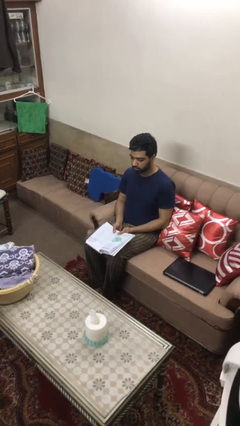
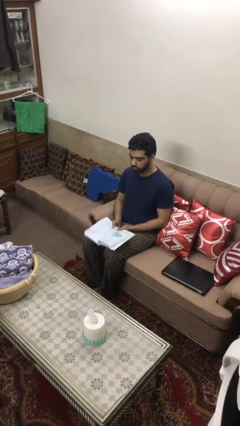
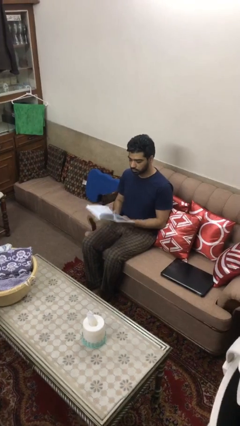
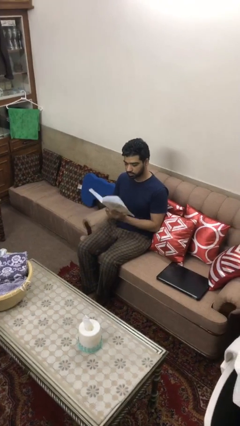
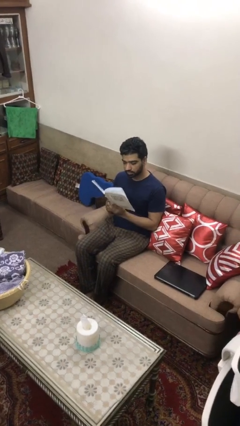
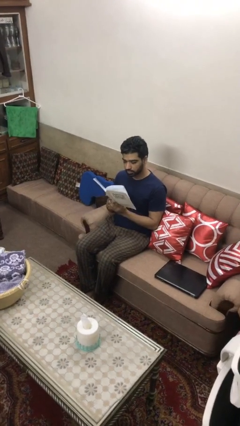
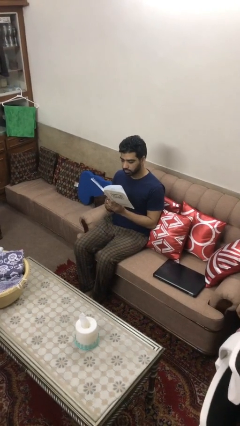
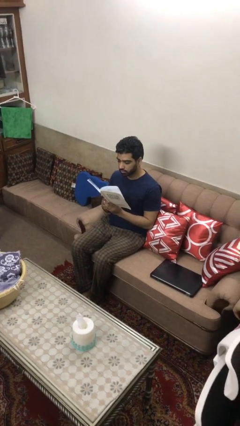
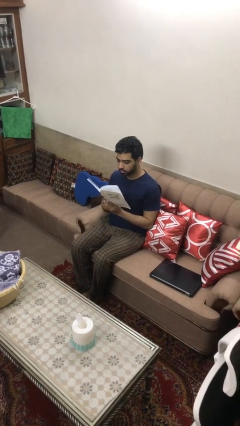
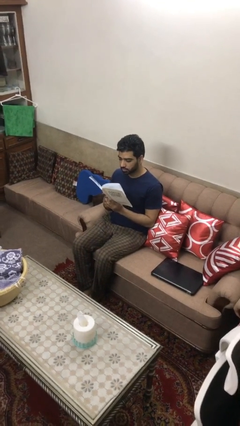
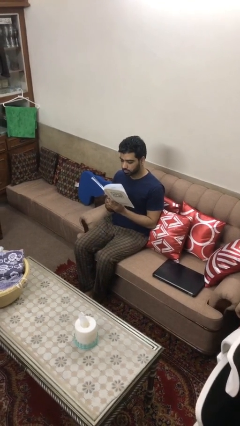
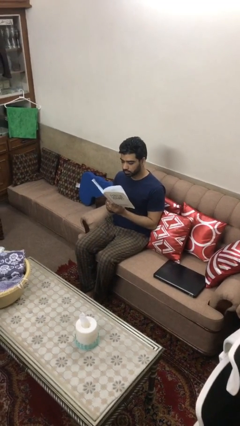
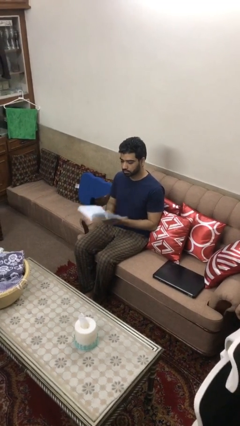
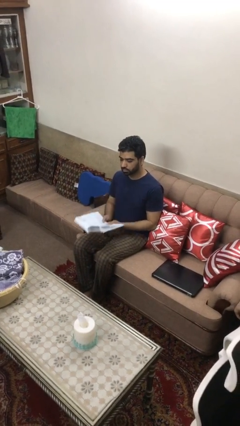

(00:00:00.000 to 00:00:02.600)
person reads document

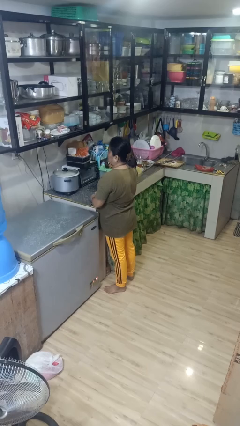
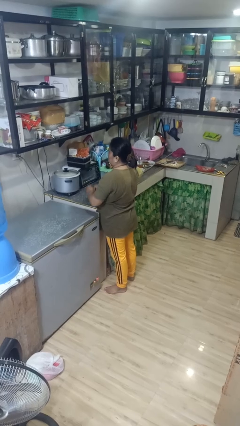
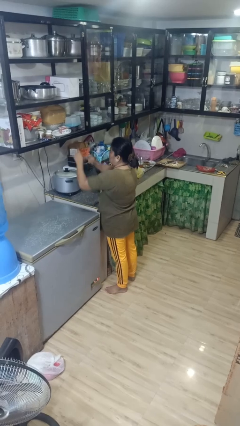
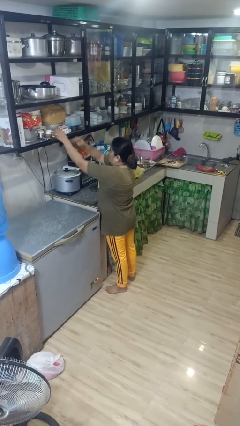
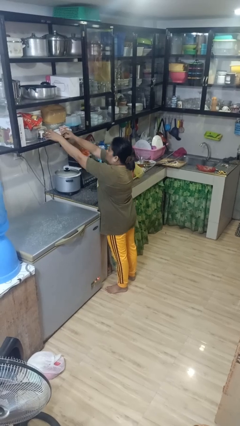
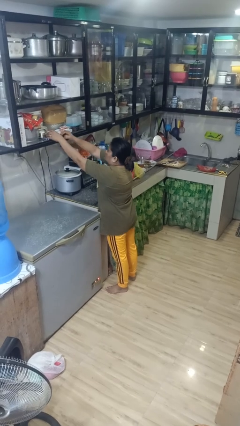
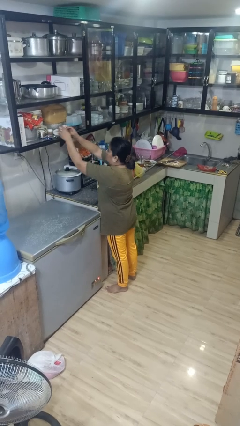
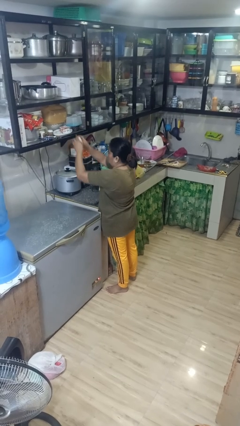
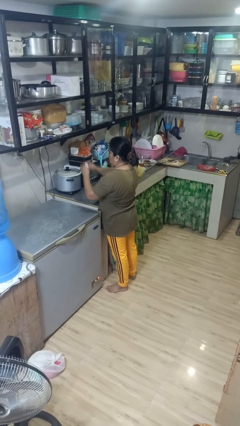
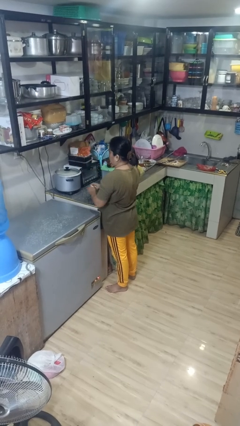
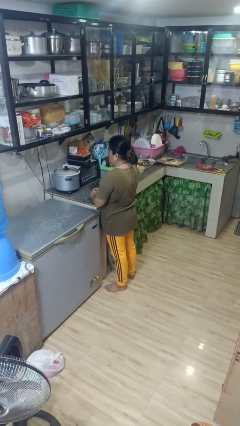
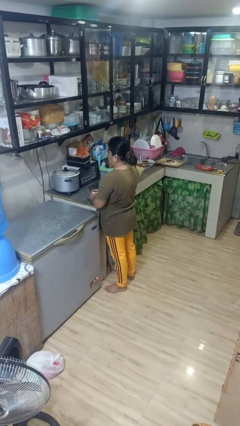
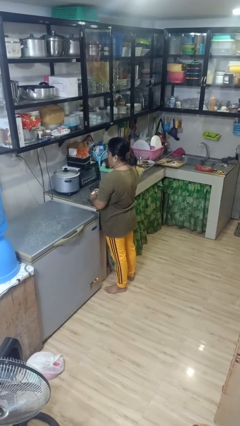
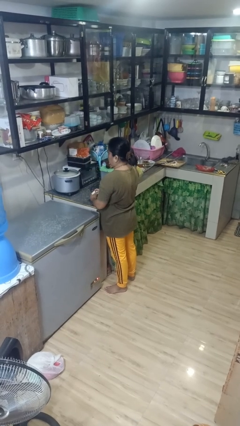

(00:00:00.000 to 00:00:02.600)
person takes object from cabinet

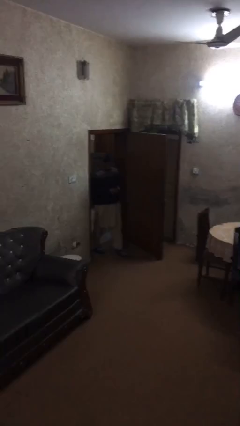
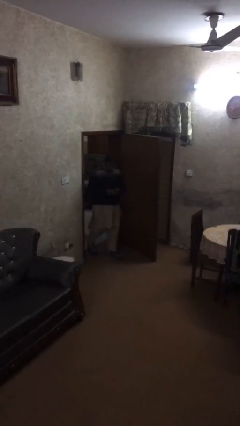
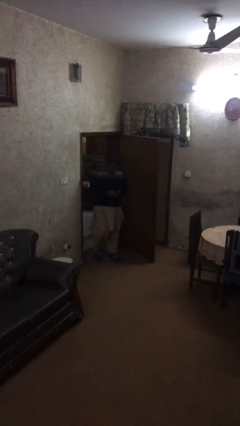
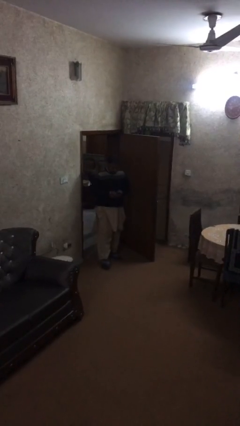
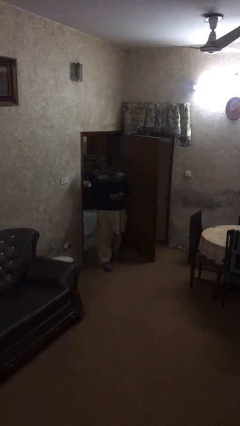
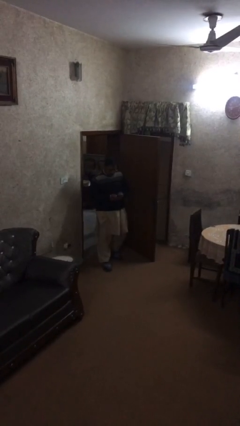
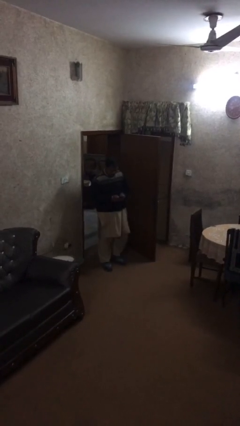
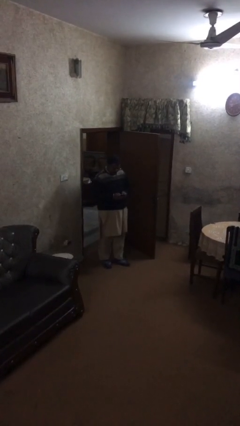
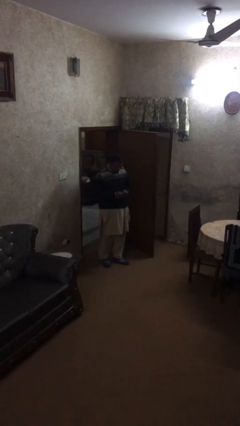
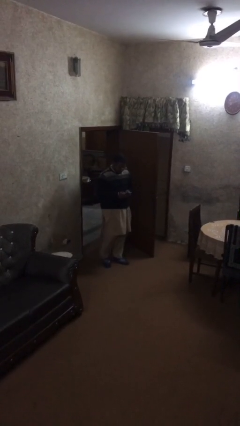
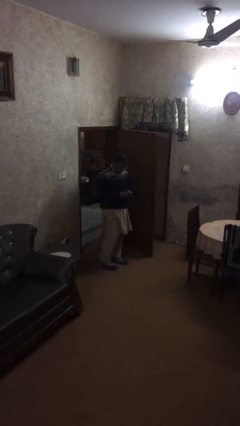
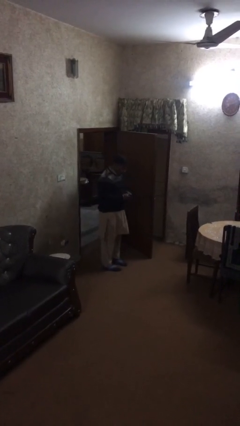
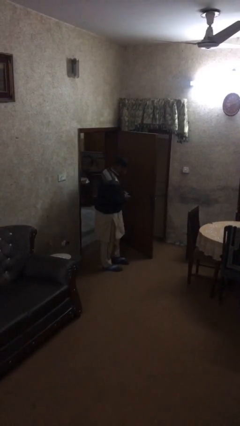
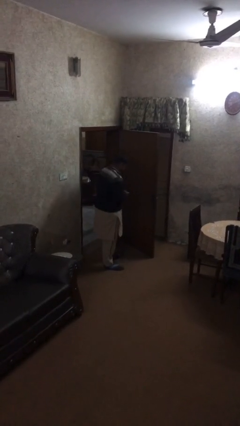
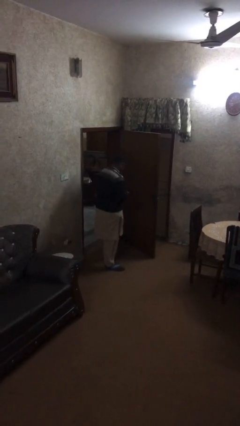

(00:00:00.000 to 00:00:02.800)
person enters scene through structure

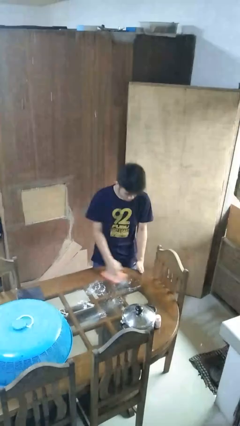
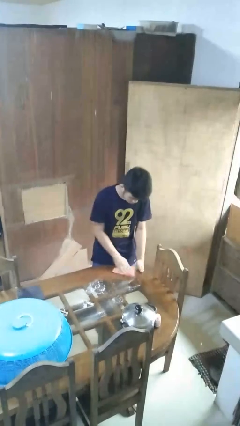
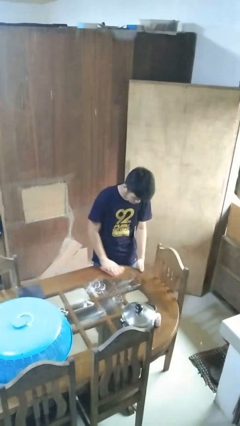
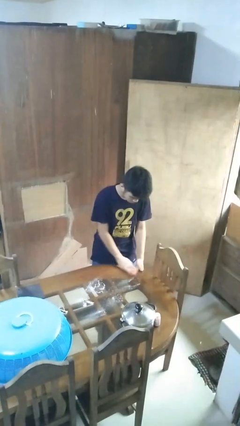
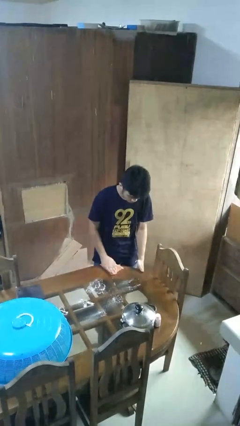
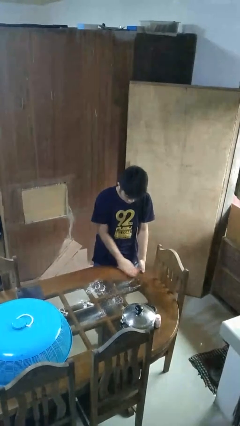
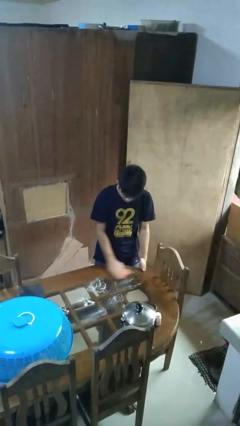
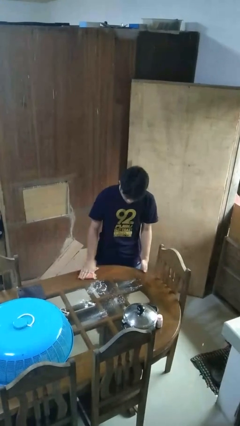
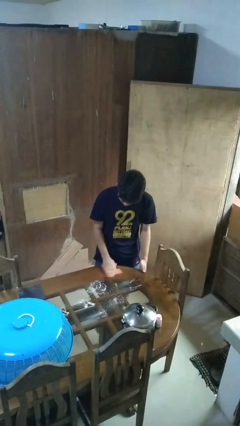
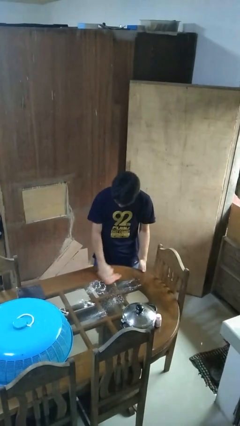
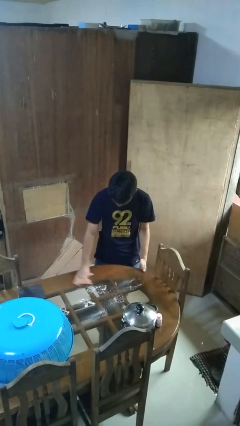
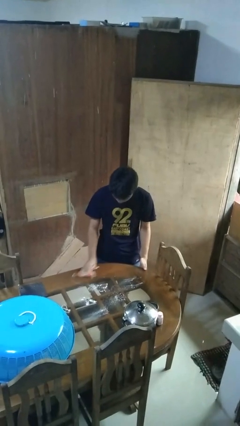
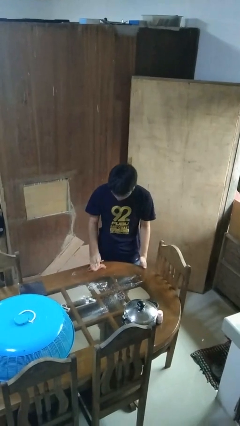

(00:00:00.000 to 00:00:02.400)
person cleans table with rag

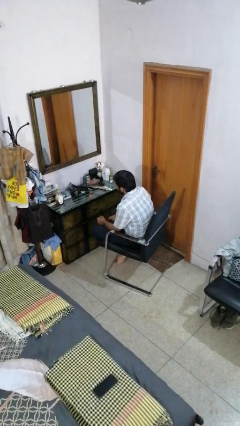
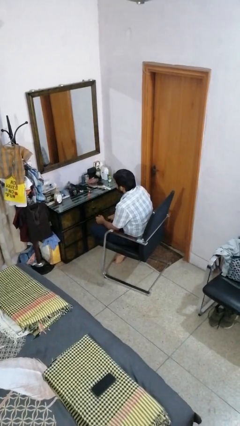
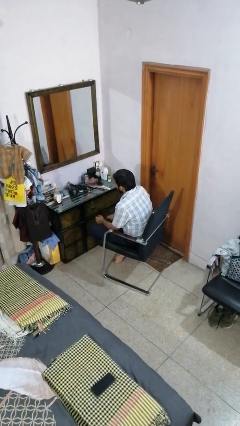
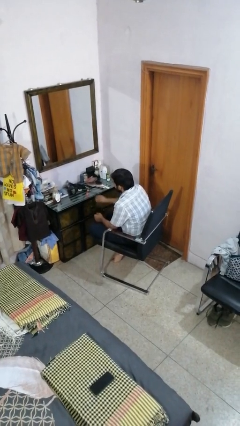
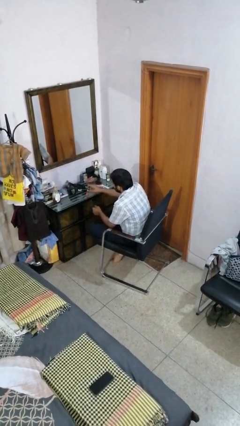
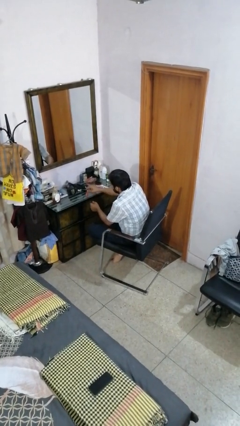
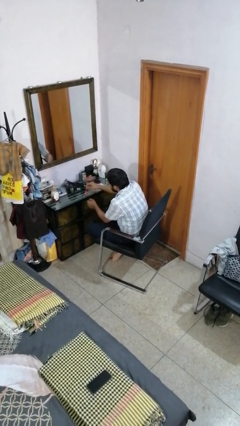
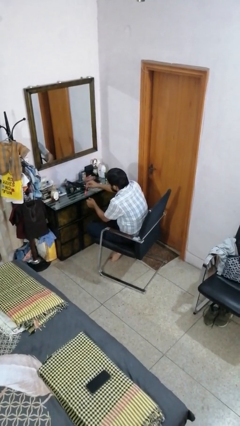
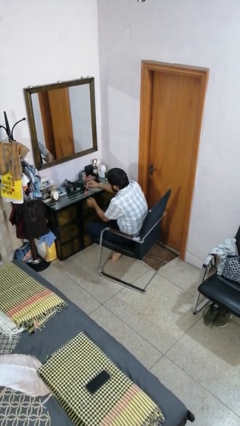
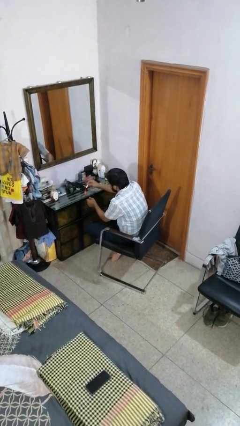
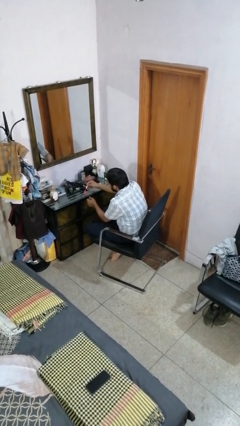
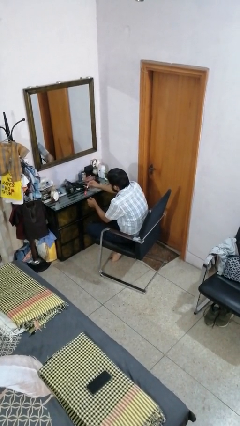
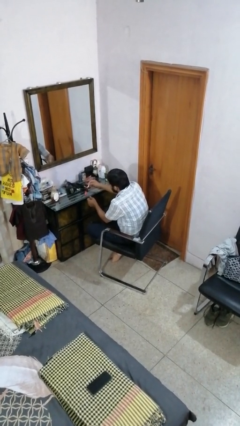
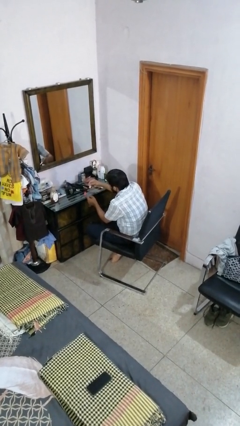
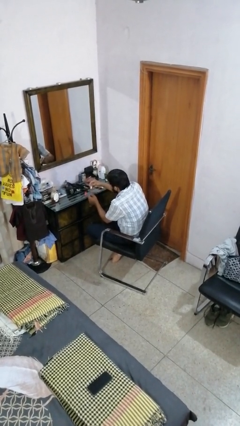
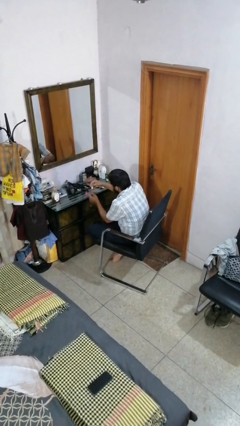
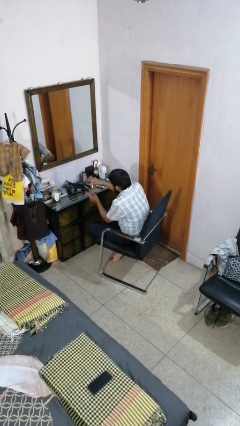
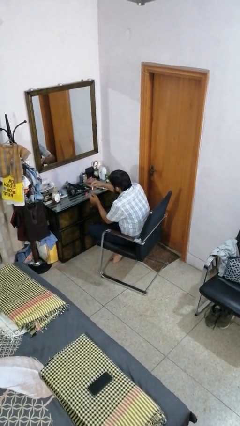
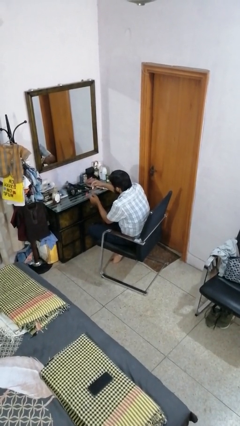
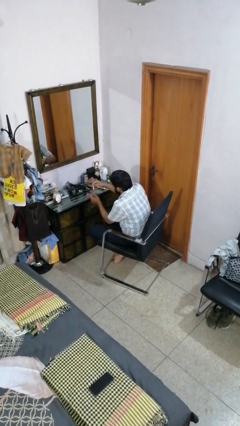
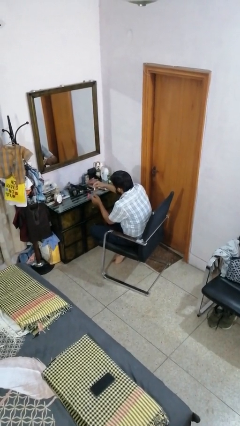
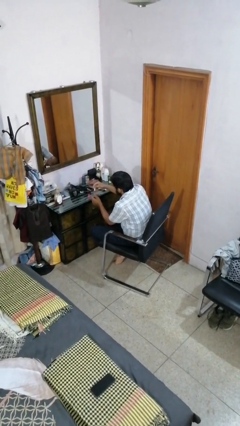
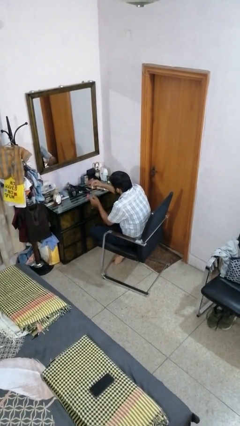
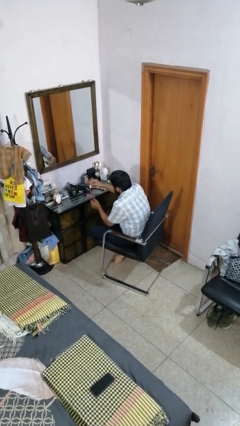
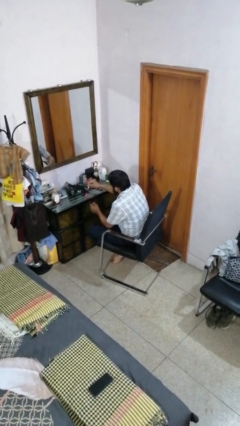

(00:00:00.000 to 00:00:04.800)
person paints fingernails

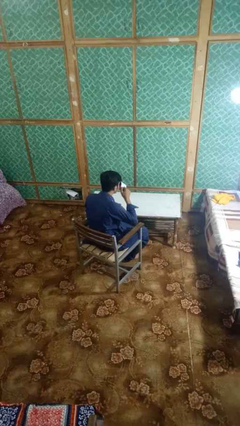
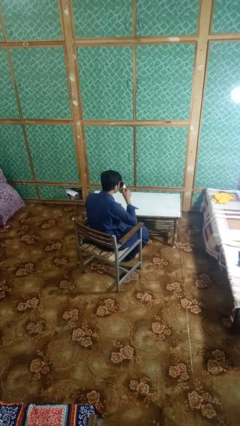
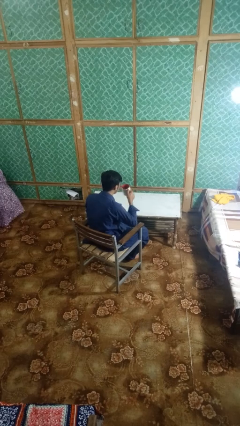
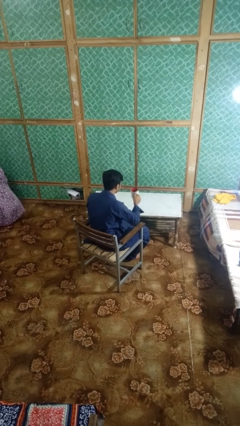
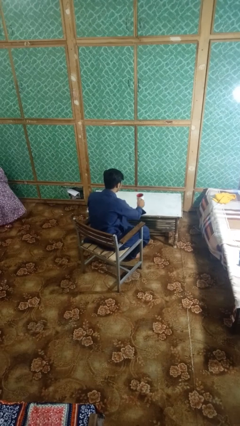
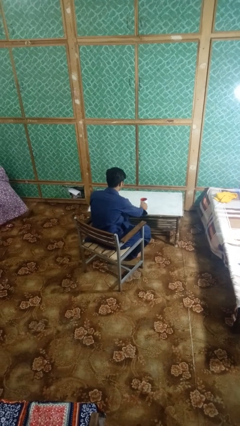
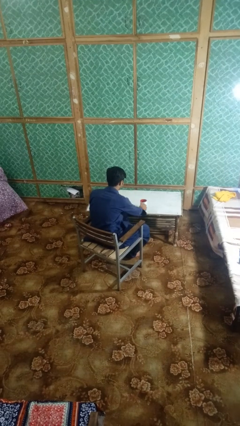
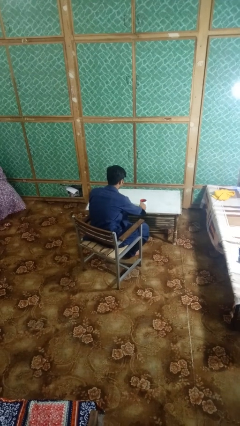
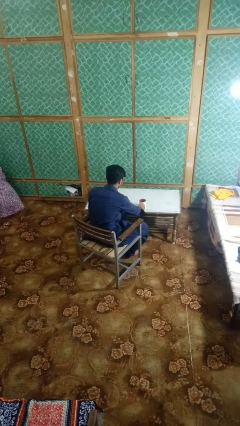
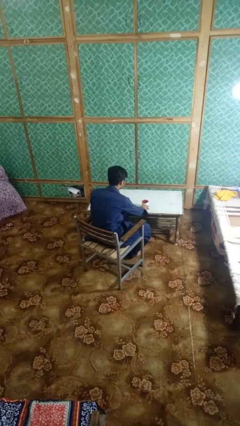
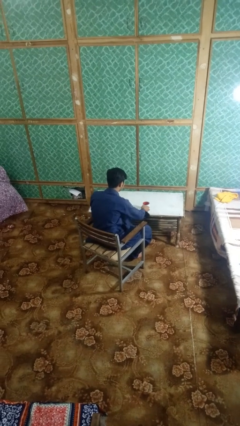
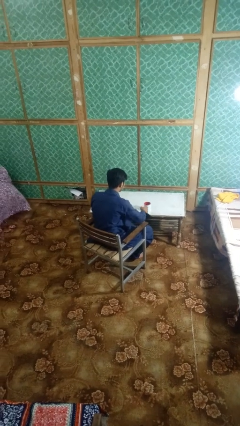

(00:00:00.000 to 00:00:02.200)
person puts down object on table
